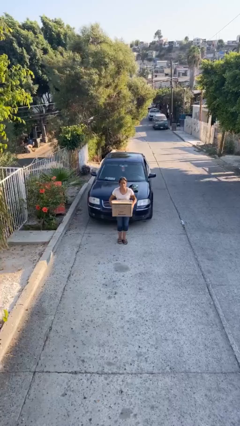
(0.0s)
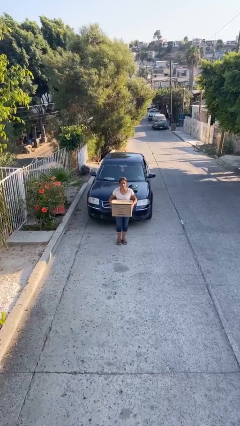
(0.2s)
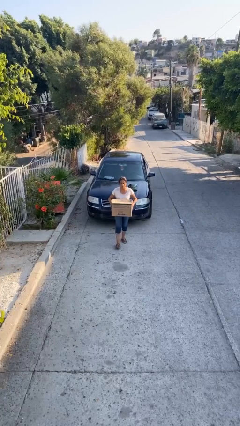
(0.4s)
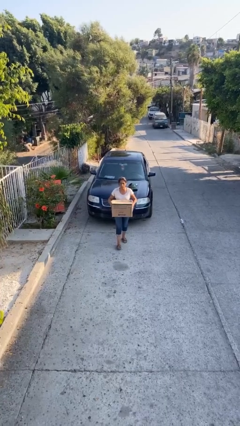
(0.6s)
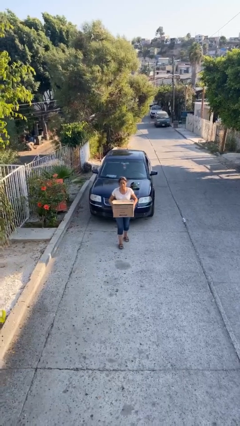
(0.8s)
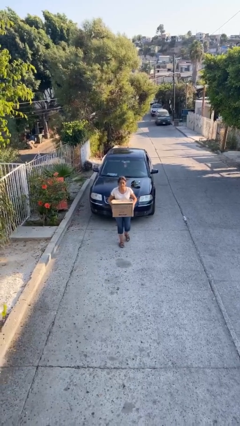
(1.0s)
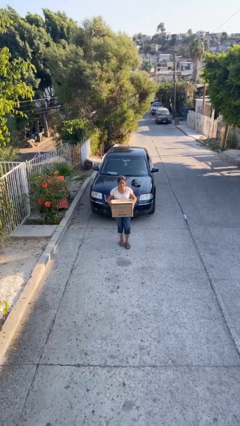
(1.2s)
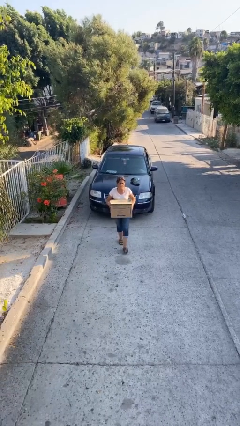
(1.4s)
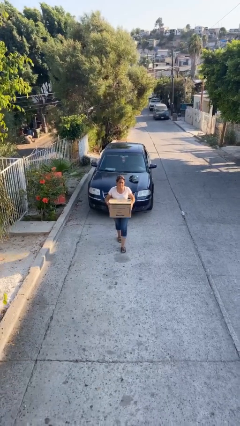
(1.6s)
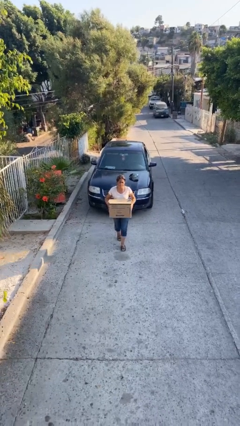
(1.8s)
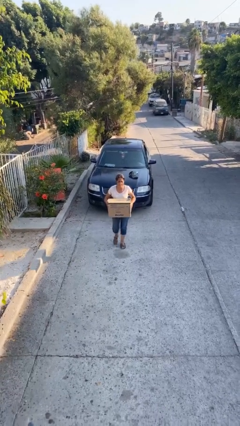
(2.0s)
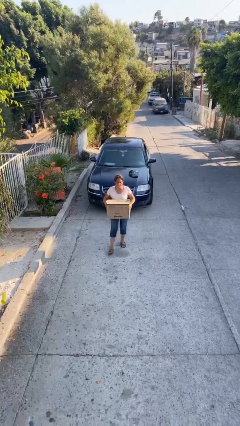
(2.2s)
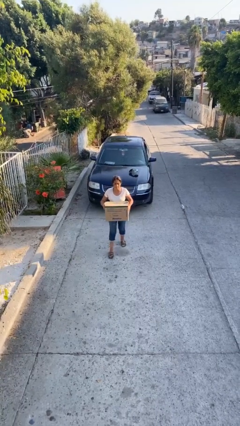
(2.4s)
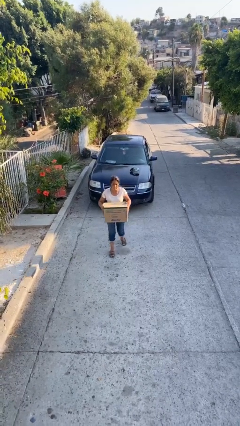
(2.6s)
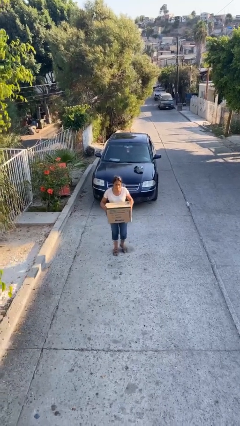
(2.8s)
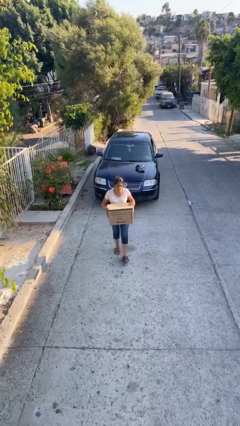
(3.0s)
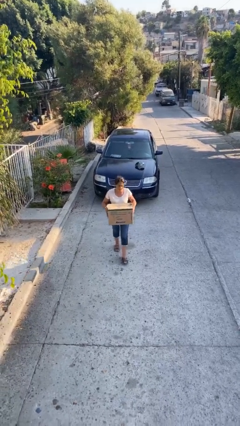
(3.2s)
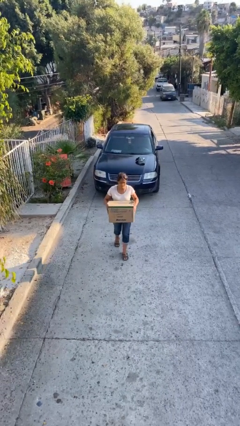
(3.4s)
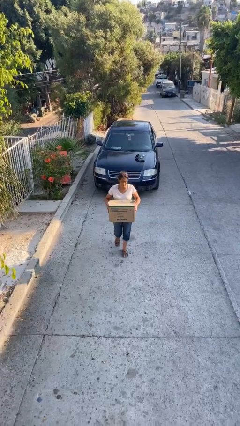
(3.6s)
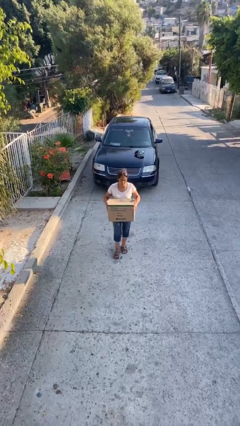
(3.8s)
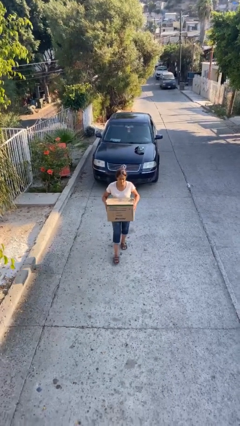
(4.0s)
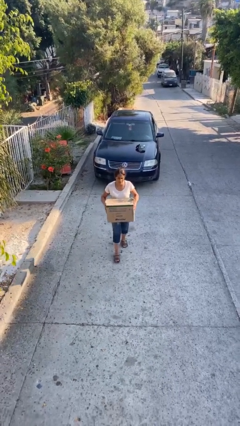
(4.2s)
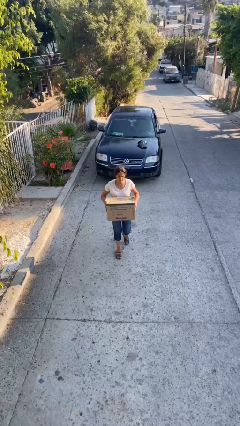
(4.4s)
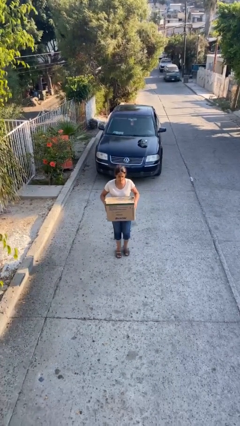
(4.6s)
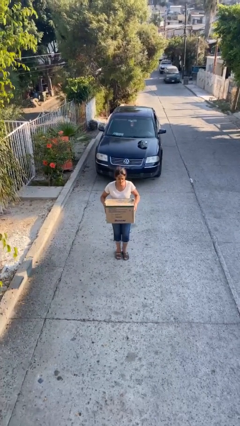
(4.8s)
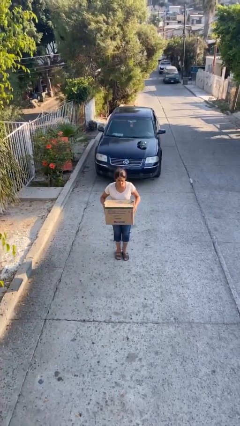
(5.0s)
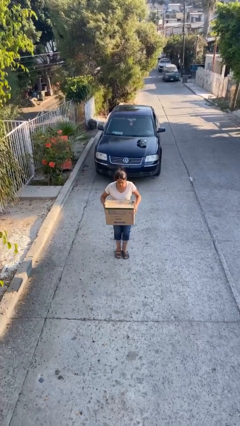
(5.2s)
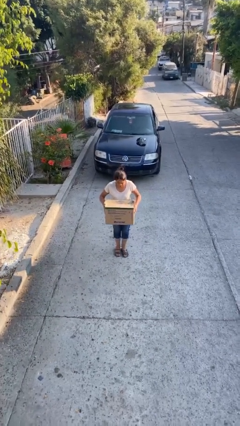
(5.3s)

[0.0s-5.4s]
person carries heavy object

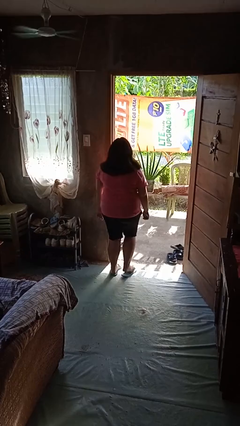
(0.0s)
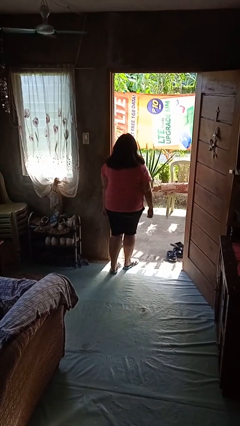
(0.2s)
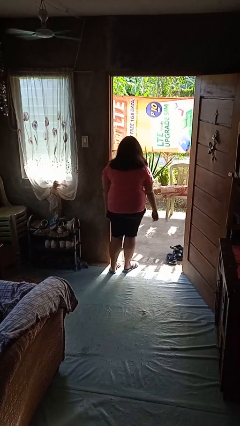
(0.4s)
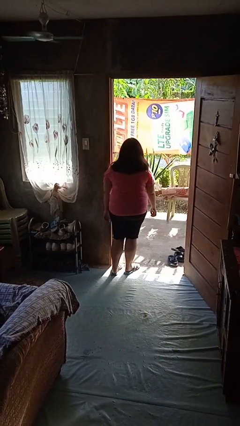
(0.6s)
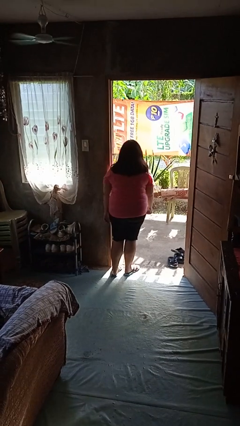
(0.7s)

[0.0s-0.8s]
person bumps into wall

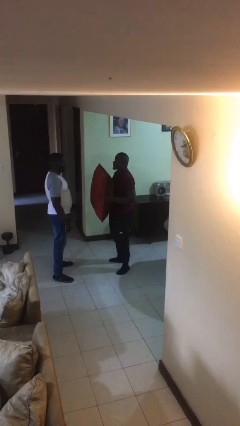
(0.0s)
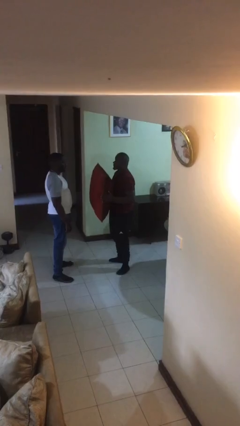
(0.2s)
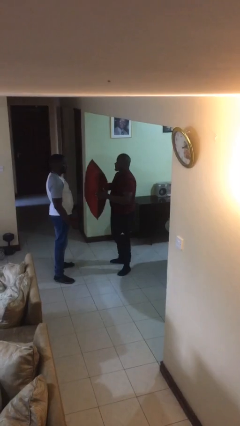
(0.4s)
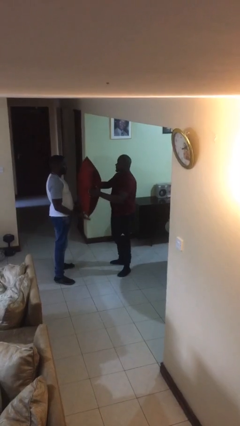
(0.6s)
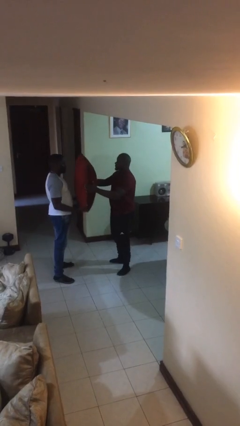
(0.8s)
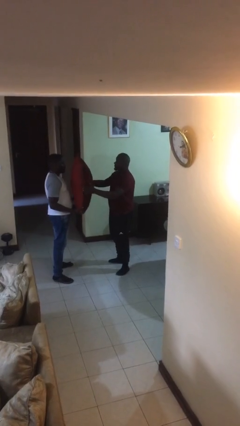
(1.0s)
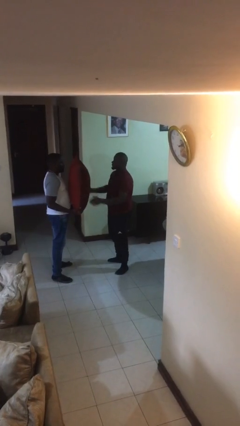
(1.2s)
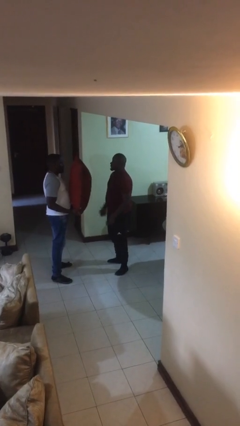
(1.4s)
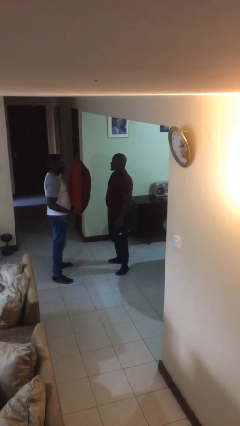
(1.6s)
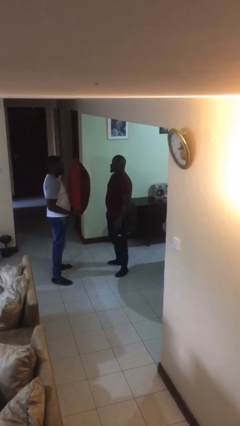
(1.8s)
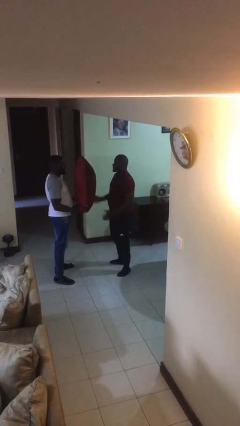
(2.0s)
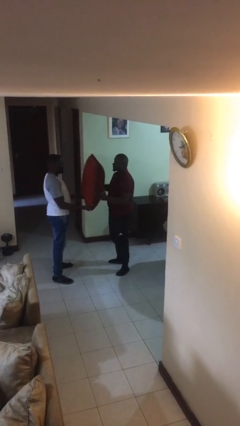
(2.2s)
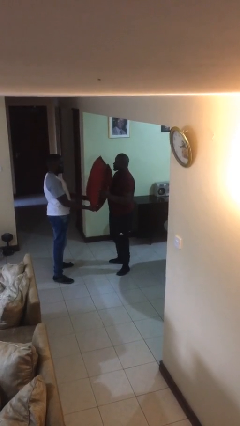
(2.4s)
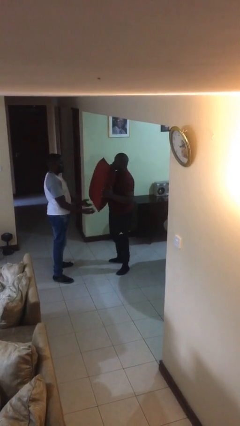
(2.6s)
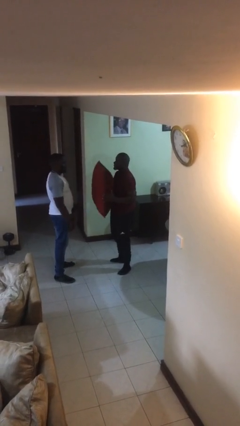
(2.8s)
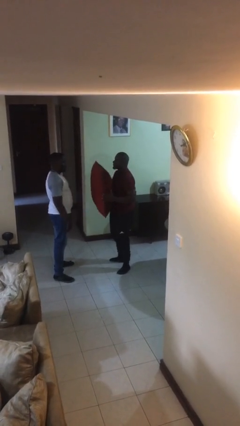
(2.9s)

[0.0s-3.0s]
person transfers object to person

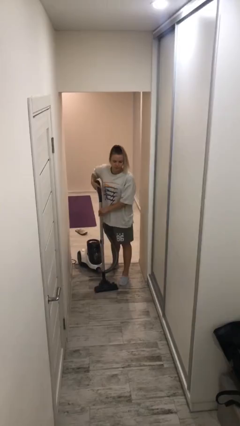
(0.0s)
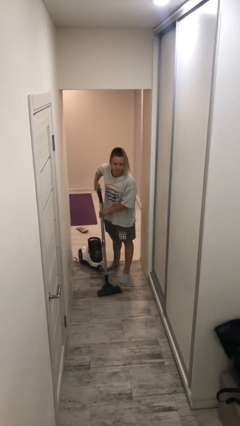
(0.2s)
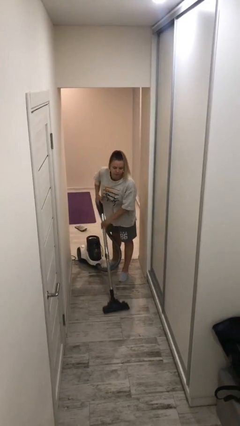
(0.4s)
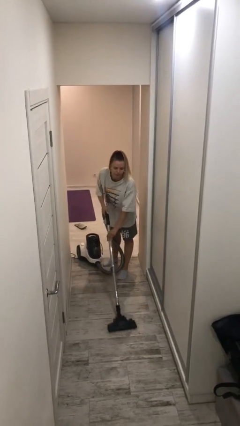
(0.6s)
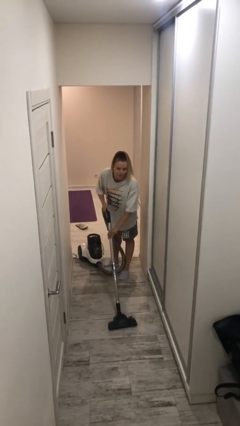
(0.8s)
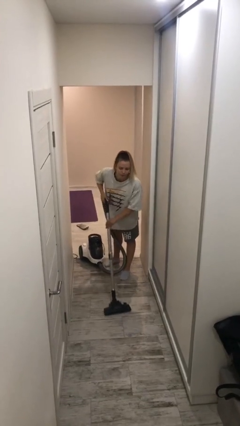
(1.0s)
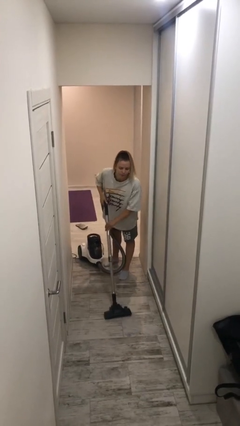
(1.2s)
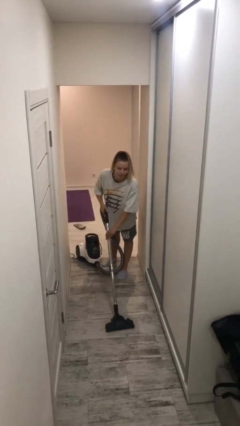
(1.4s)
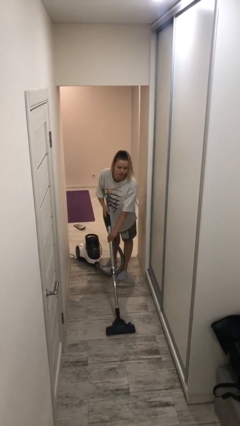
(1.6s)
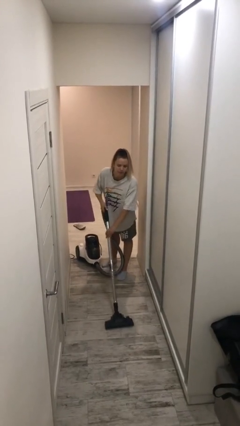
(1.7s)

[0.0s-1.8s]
person vacuums carpet

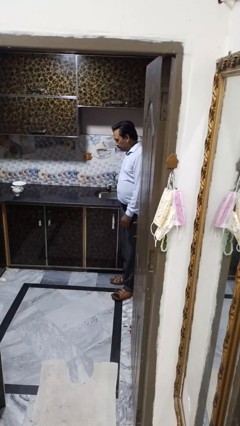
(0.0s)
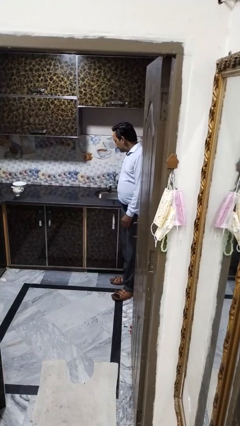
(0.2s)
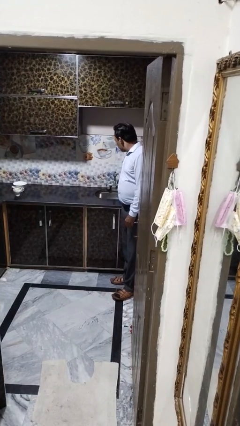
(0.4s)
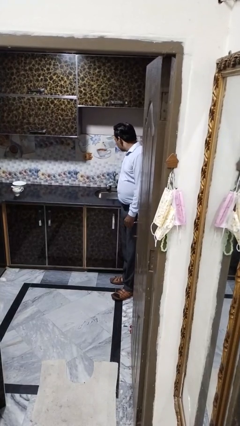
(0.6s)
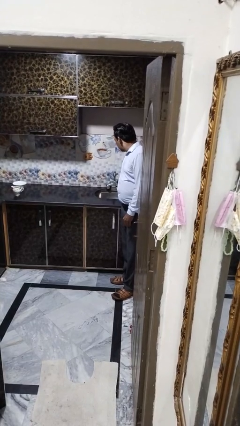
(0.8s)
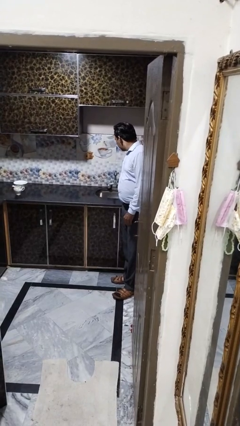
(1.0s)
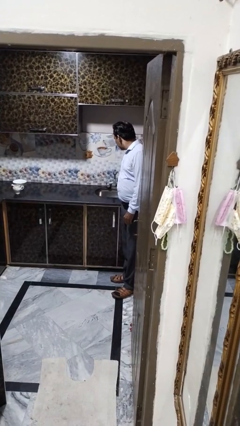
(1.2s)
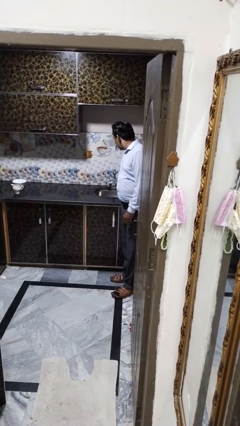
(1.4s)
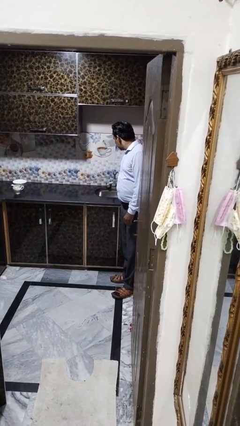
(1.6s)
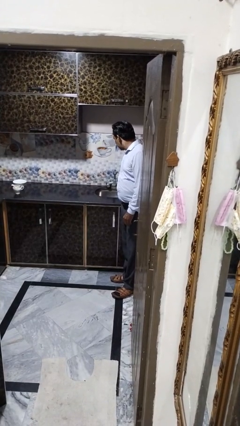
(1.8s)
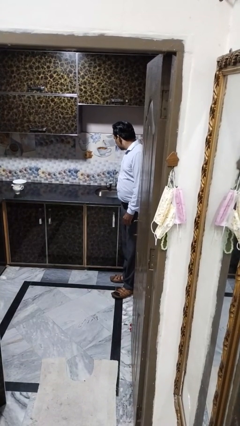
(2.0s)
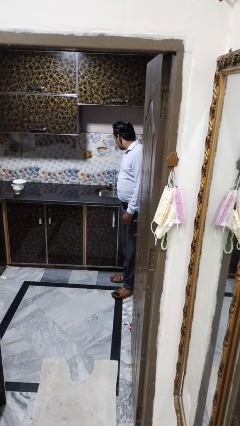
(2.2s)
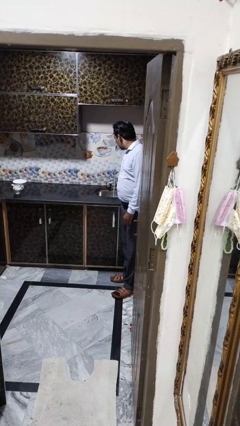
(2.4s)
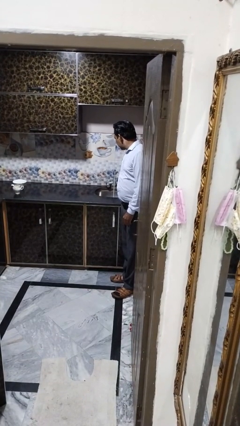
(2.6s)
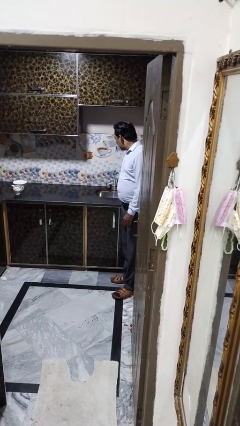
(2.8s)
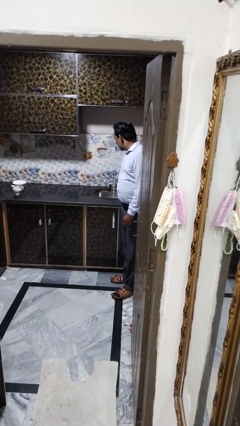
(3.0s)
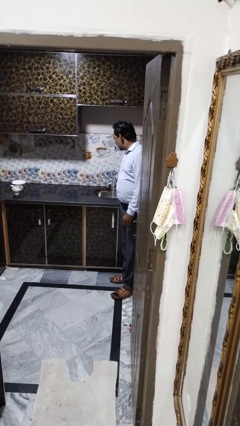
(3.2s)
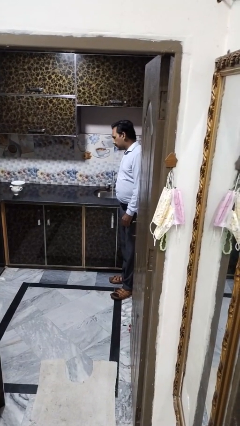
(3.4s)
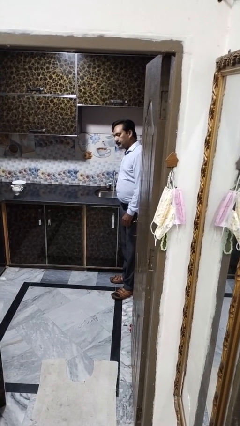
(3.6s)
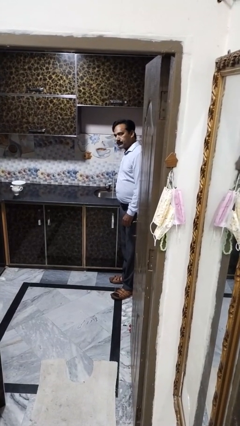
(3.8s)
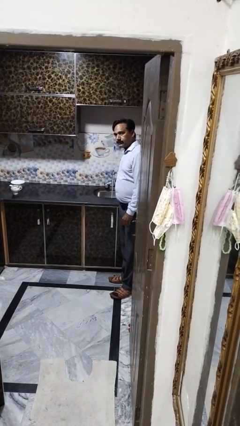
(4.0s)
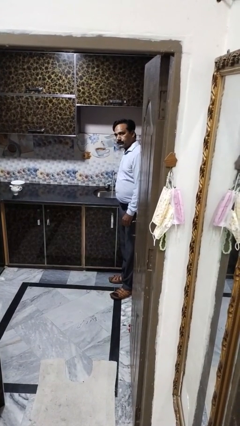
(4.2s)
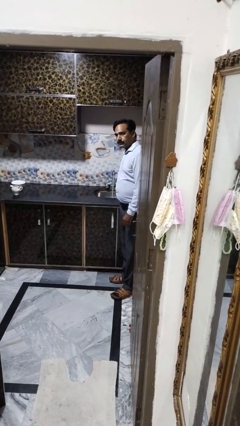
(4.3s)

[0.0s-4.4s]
person turns on faucet

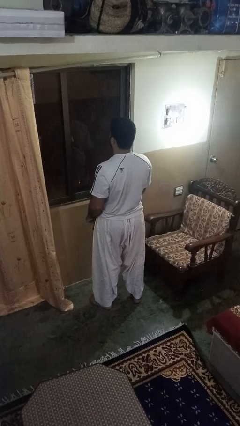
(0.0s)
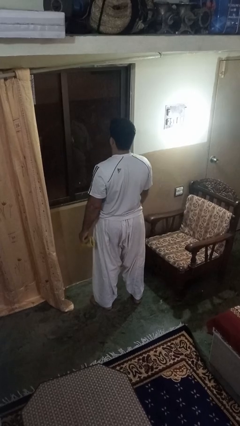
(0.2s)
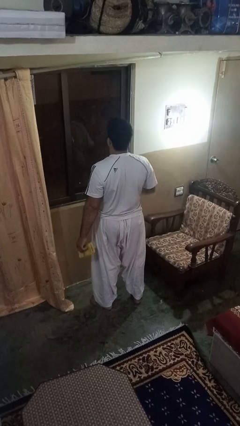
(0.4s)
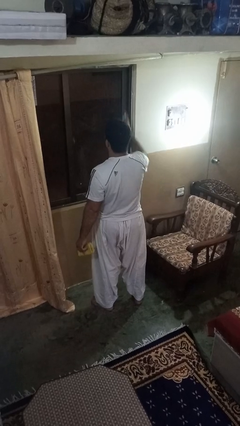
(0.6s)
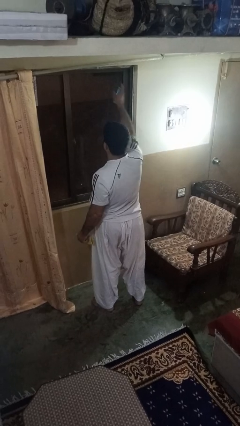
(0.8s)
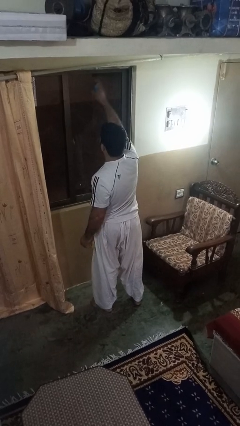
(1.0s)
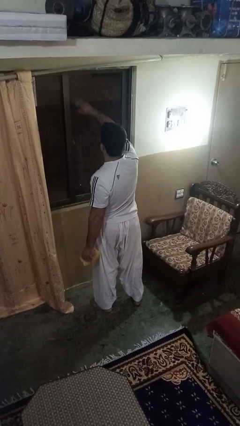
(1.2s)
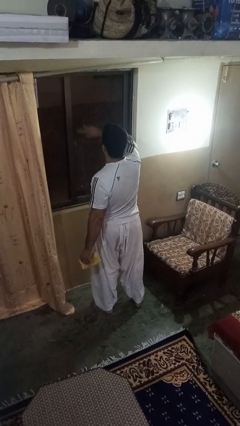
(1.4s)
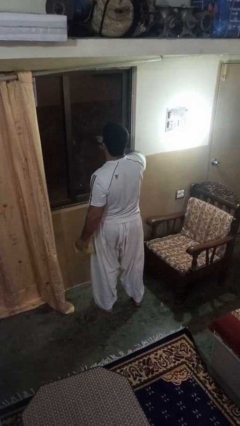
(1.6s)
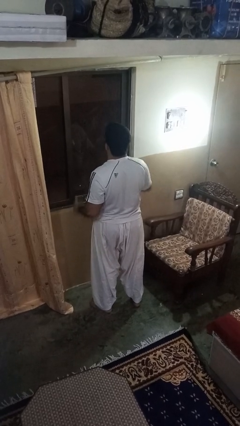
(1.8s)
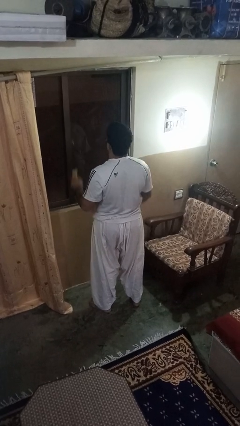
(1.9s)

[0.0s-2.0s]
person sprays from bottle
